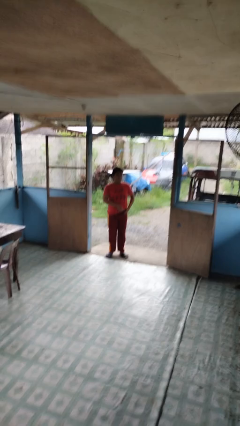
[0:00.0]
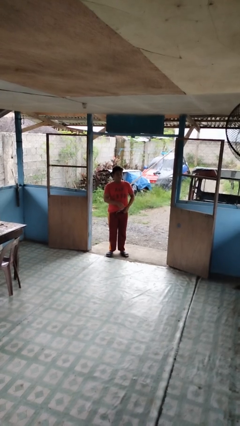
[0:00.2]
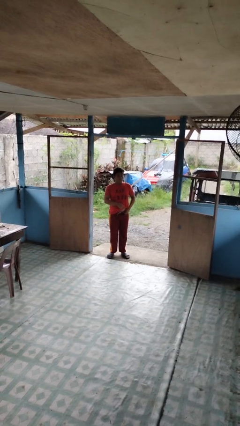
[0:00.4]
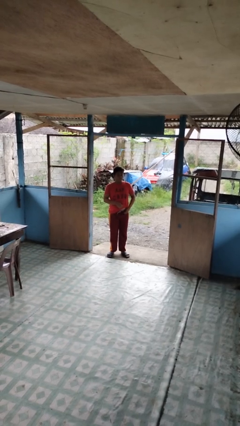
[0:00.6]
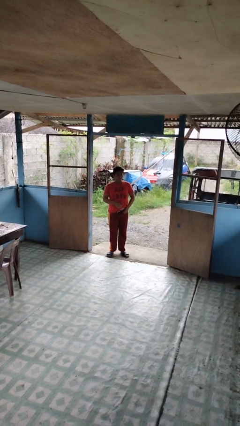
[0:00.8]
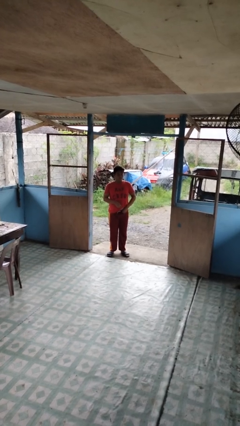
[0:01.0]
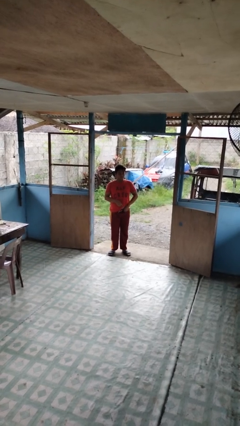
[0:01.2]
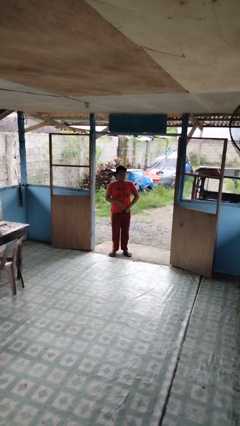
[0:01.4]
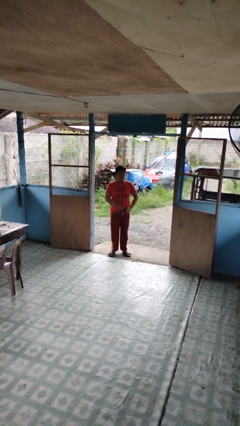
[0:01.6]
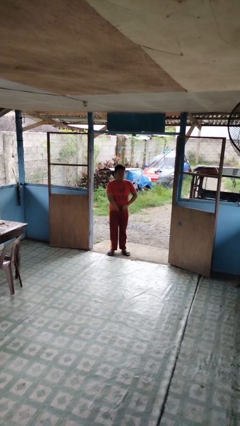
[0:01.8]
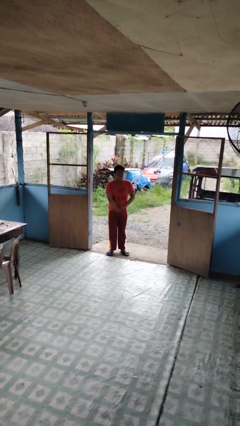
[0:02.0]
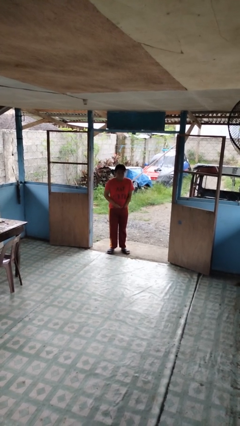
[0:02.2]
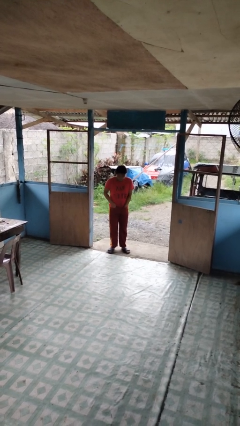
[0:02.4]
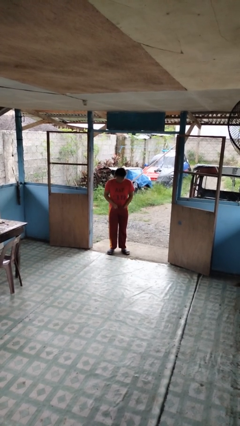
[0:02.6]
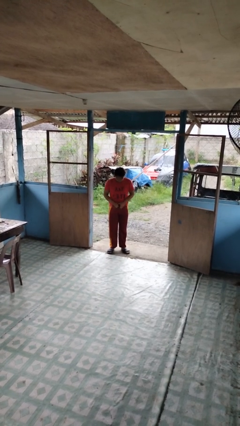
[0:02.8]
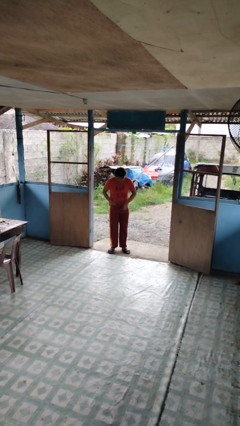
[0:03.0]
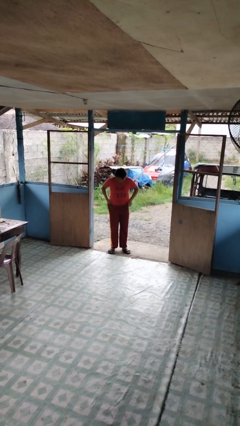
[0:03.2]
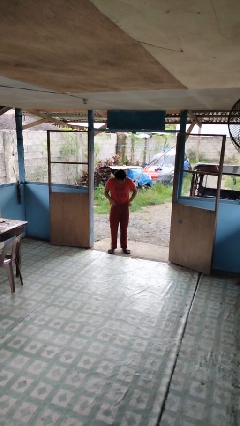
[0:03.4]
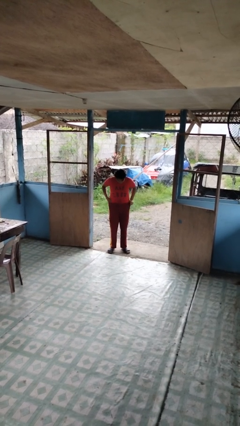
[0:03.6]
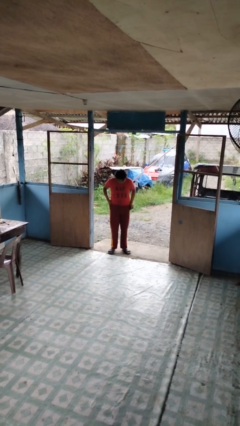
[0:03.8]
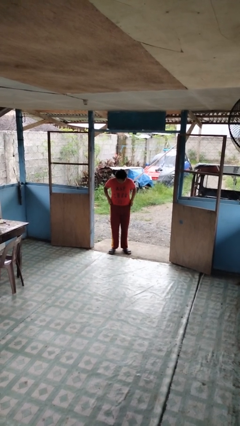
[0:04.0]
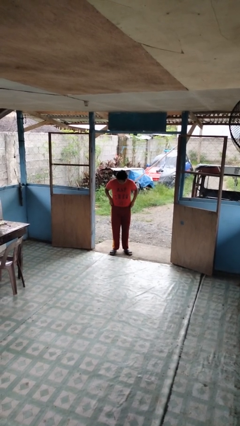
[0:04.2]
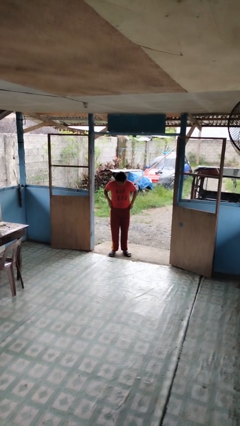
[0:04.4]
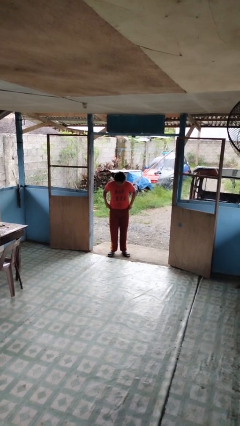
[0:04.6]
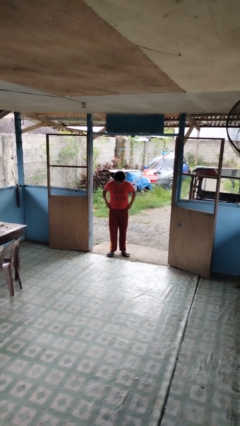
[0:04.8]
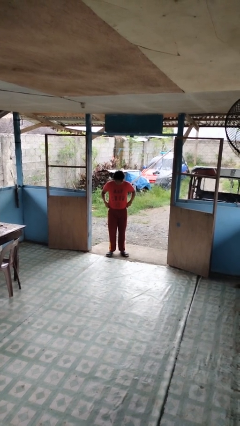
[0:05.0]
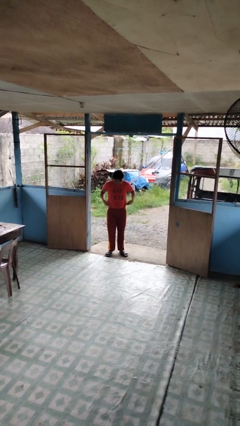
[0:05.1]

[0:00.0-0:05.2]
person tucks in shirt

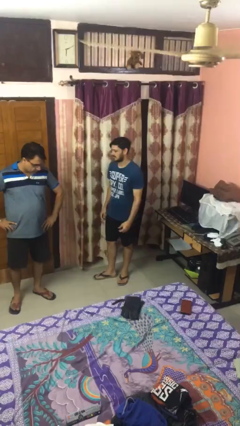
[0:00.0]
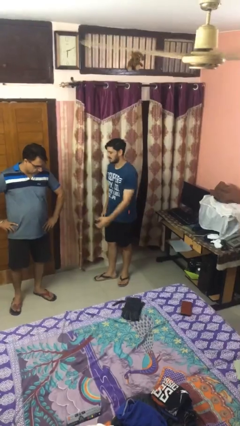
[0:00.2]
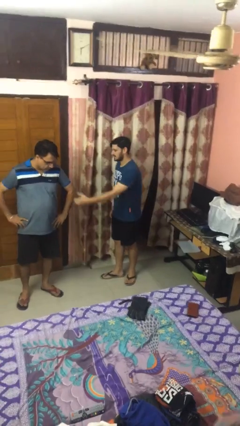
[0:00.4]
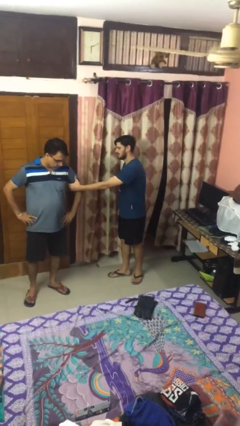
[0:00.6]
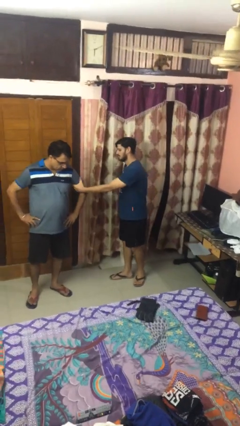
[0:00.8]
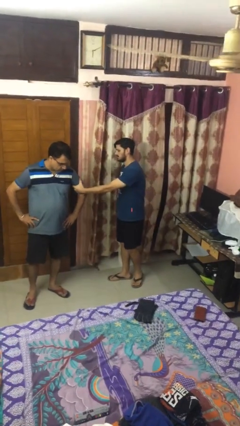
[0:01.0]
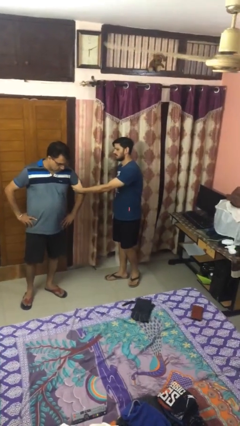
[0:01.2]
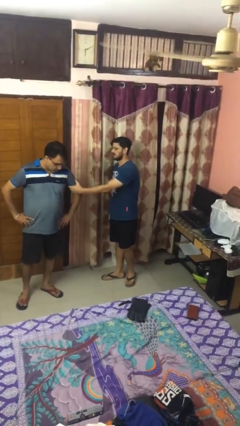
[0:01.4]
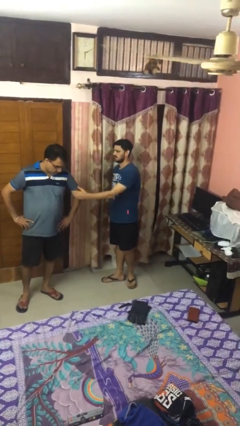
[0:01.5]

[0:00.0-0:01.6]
person grabs person by bicep

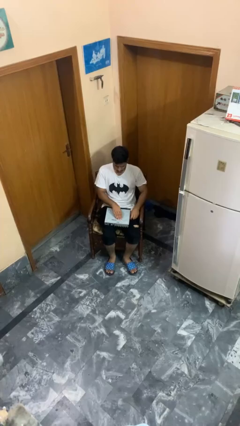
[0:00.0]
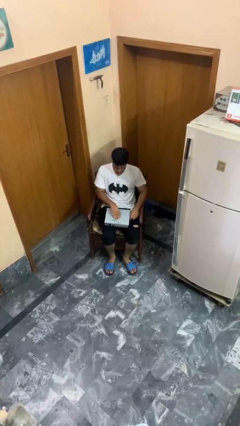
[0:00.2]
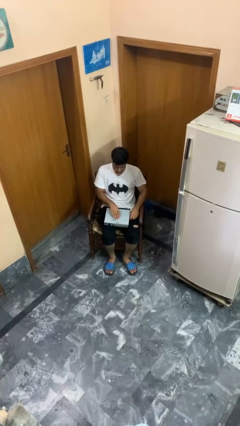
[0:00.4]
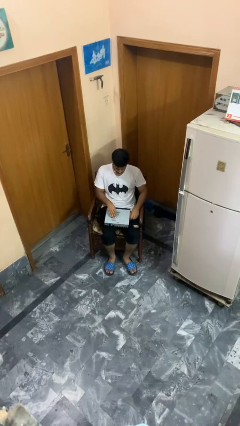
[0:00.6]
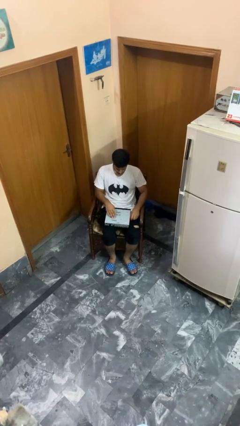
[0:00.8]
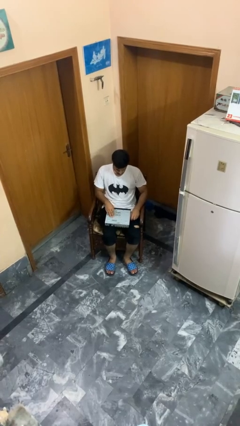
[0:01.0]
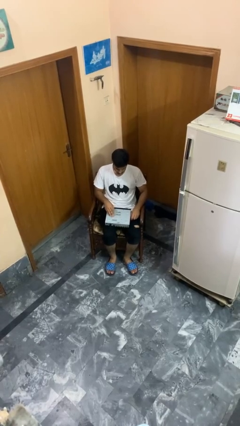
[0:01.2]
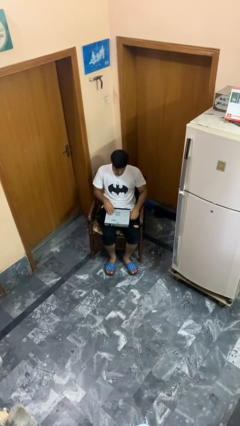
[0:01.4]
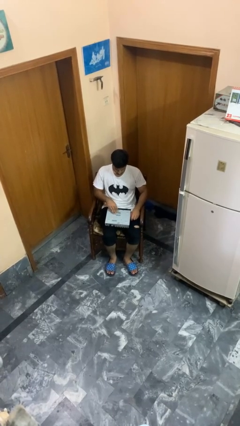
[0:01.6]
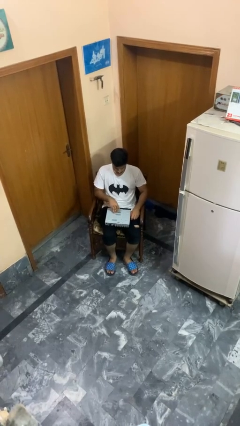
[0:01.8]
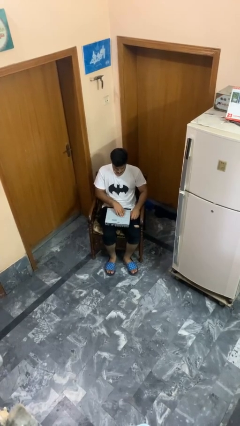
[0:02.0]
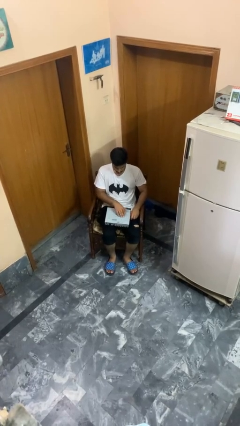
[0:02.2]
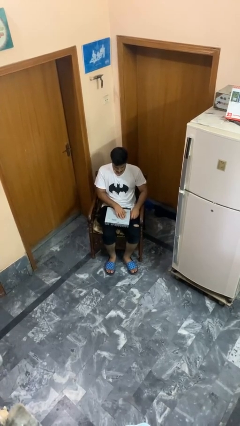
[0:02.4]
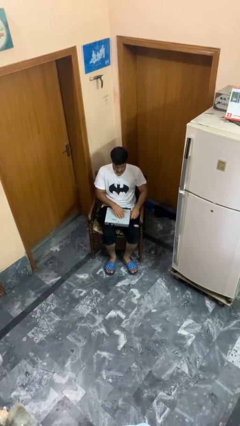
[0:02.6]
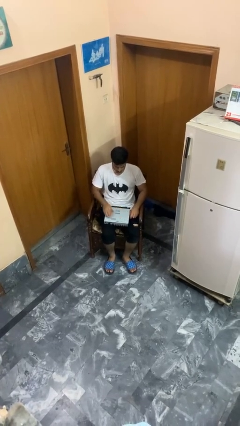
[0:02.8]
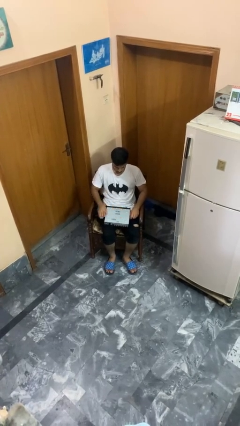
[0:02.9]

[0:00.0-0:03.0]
person taps object with finger

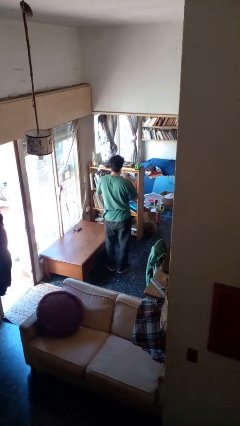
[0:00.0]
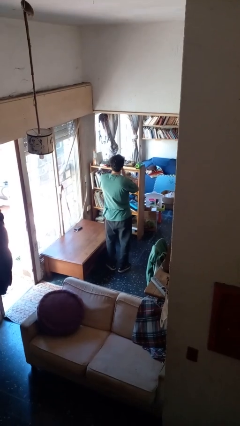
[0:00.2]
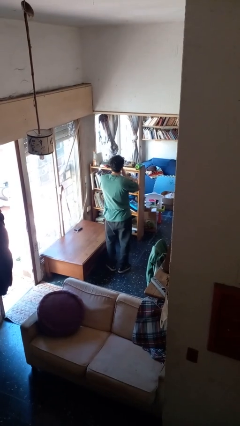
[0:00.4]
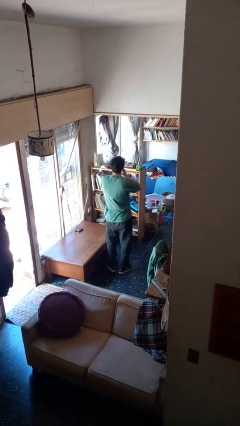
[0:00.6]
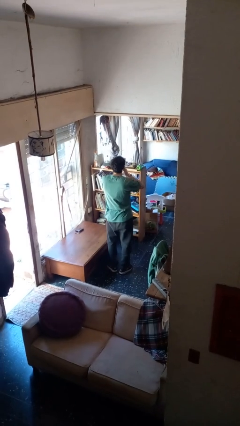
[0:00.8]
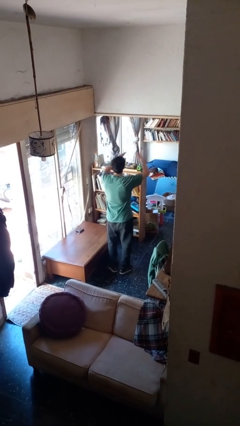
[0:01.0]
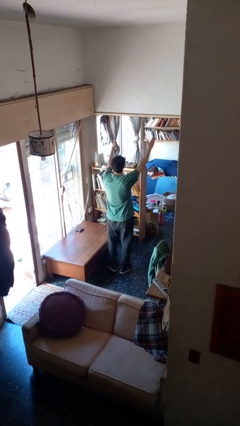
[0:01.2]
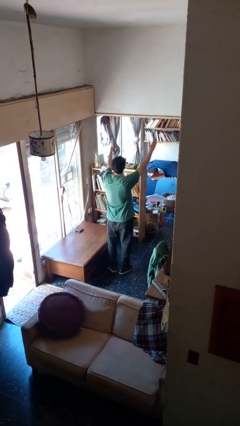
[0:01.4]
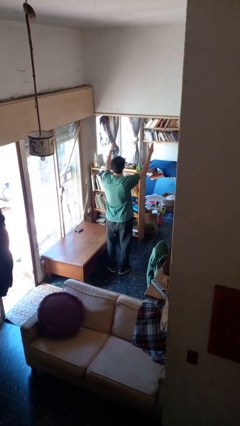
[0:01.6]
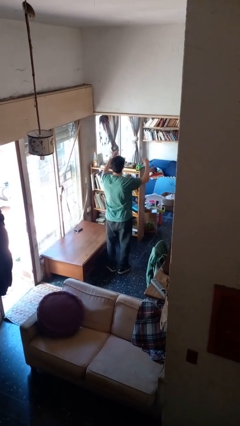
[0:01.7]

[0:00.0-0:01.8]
person gestures blow kiss

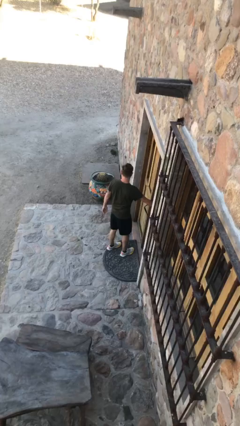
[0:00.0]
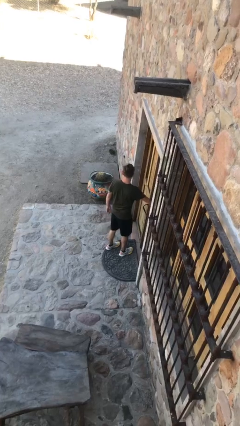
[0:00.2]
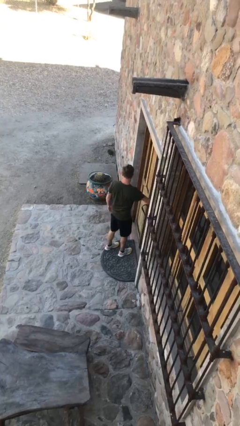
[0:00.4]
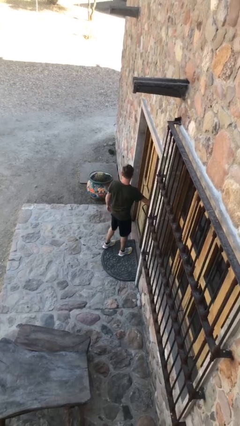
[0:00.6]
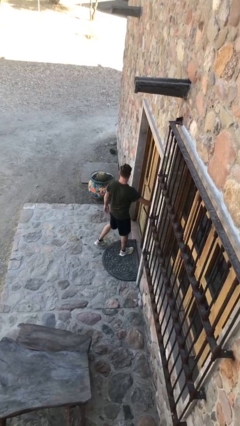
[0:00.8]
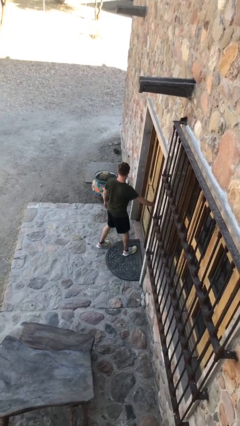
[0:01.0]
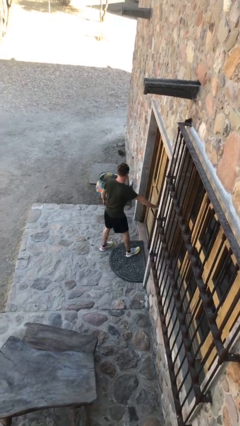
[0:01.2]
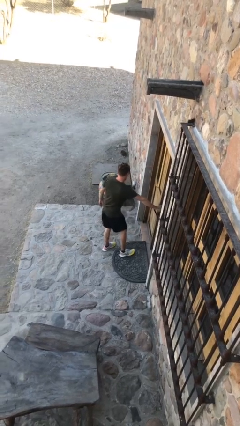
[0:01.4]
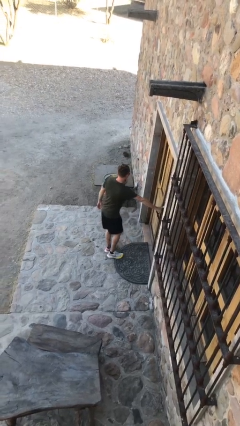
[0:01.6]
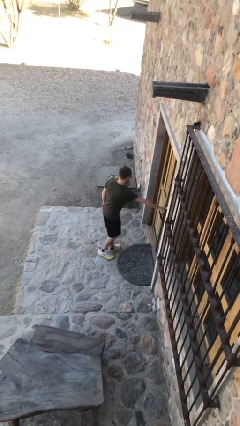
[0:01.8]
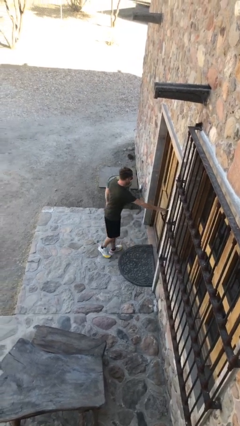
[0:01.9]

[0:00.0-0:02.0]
person closes facility door

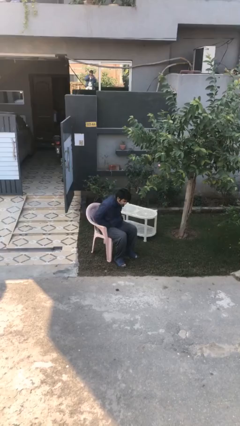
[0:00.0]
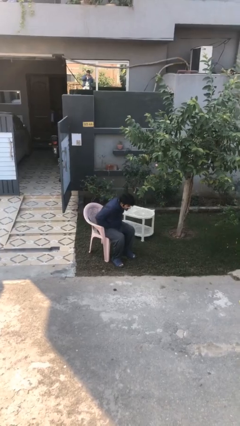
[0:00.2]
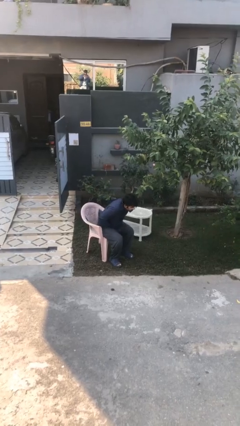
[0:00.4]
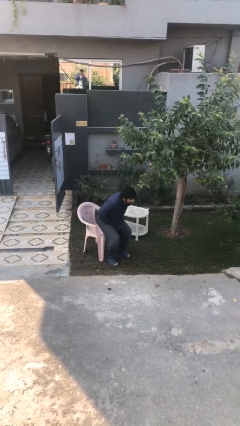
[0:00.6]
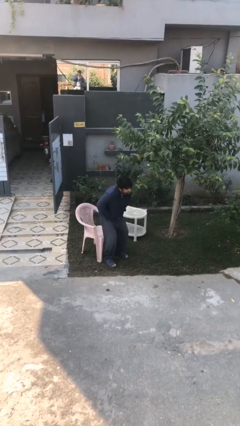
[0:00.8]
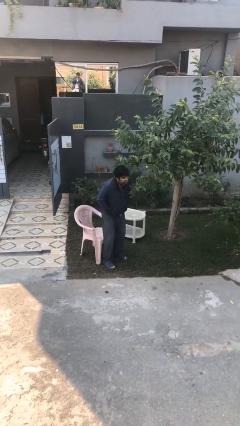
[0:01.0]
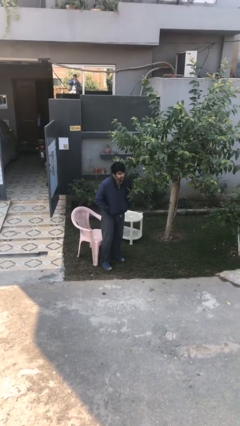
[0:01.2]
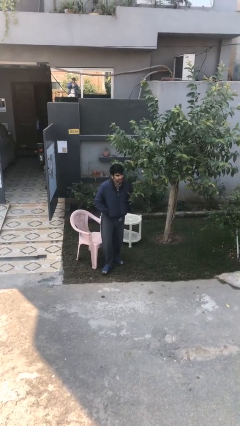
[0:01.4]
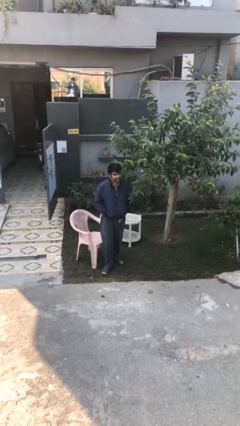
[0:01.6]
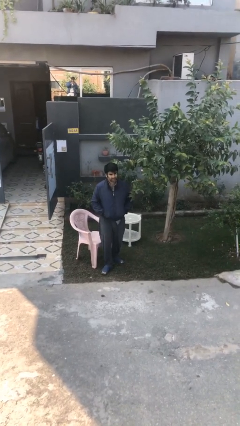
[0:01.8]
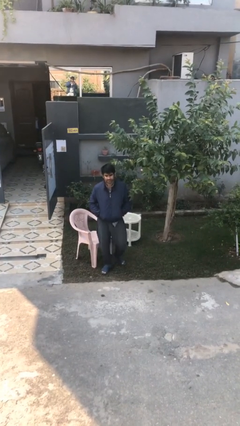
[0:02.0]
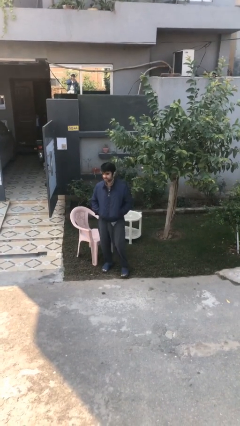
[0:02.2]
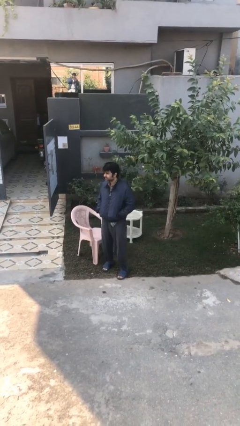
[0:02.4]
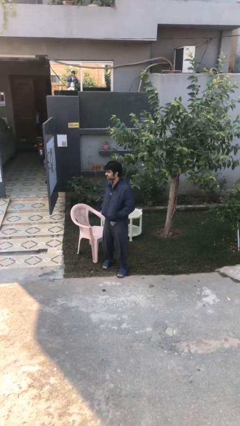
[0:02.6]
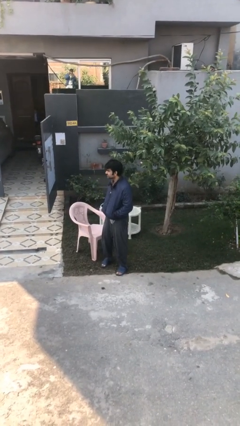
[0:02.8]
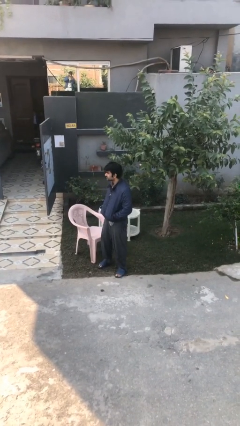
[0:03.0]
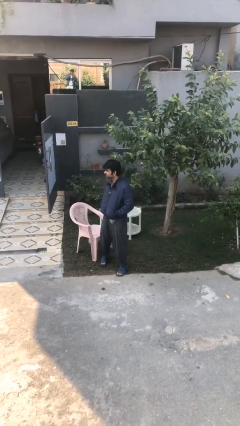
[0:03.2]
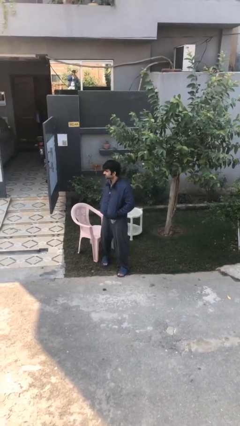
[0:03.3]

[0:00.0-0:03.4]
person stands up
